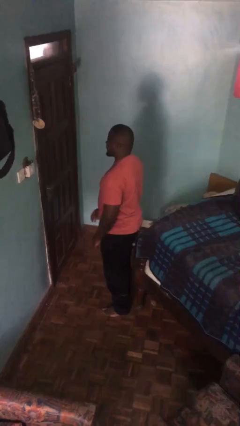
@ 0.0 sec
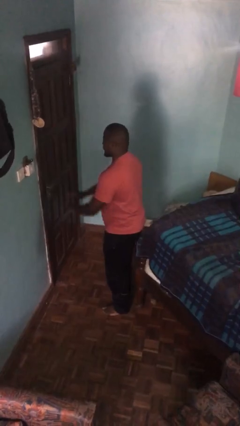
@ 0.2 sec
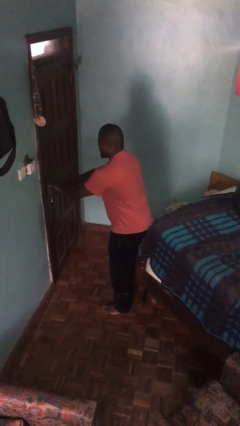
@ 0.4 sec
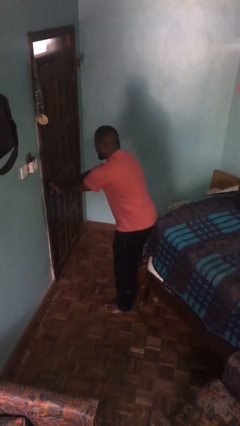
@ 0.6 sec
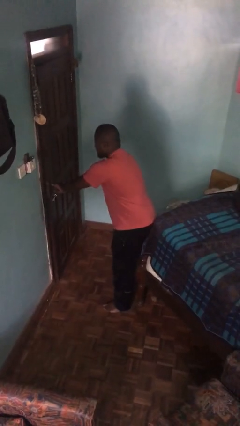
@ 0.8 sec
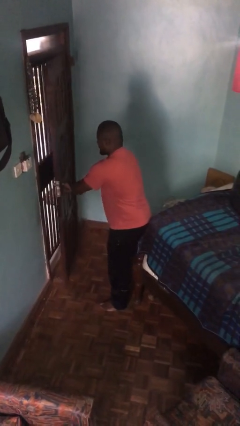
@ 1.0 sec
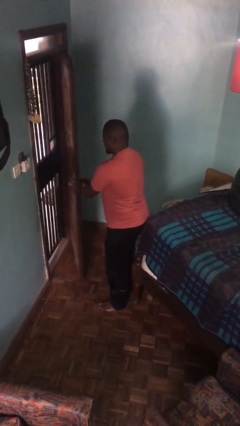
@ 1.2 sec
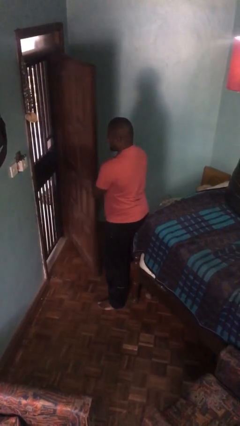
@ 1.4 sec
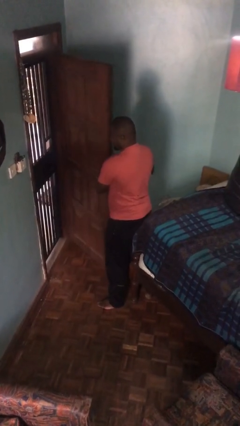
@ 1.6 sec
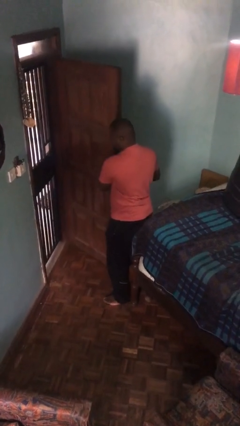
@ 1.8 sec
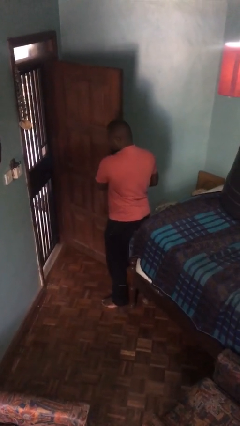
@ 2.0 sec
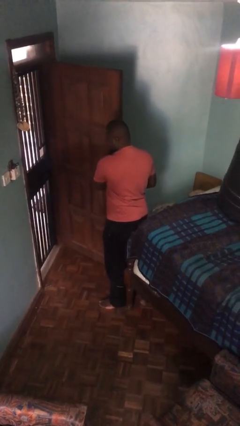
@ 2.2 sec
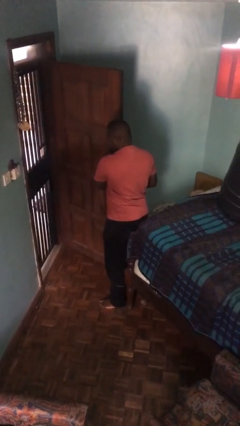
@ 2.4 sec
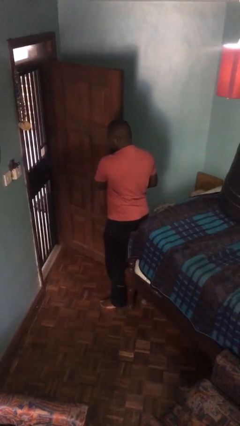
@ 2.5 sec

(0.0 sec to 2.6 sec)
person opens facility door

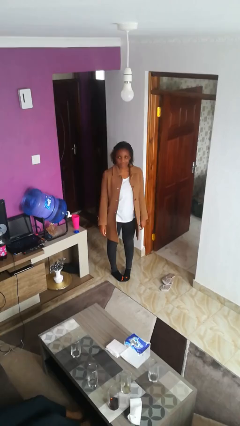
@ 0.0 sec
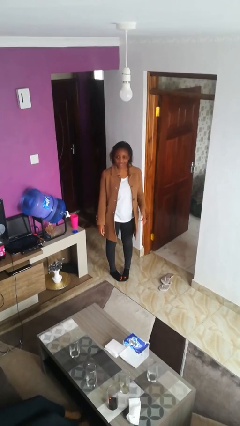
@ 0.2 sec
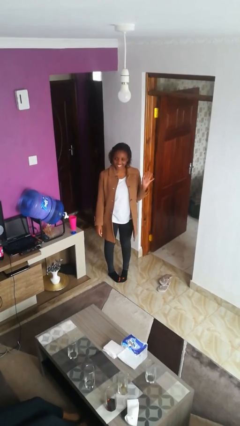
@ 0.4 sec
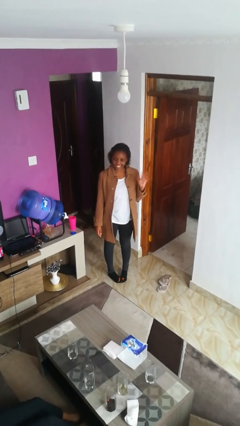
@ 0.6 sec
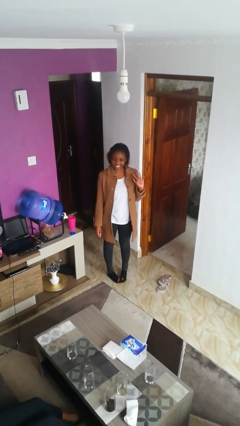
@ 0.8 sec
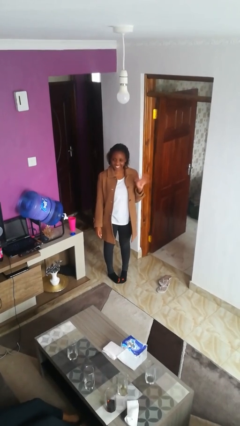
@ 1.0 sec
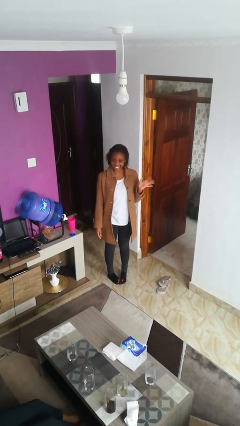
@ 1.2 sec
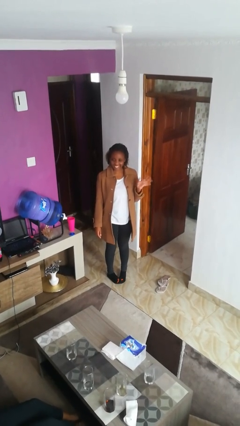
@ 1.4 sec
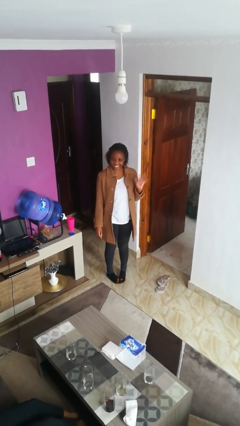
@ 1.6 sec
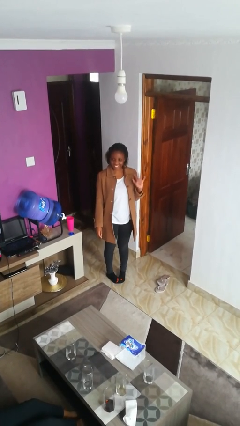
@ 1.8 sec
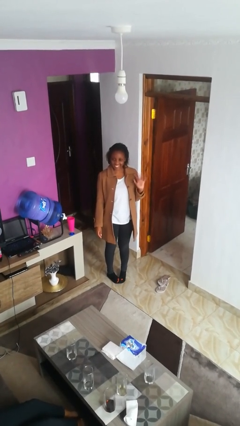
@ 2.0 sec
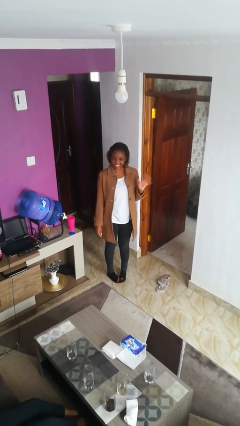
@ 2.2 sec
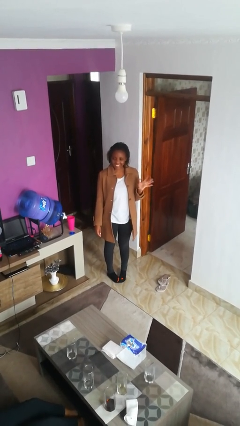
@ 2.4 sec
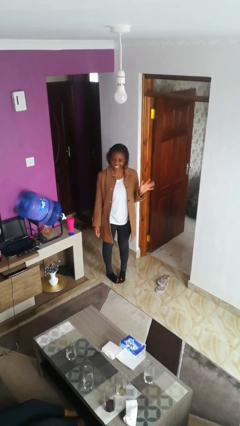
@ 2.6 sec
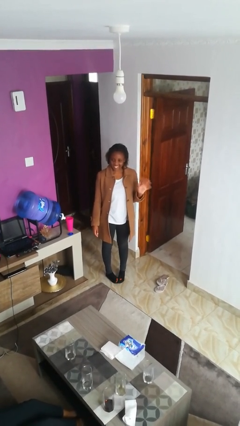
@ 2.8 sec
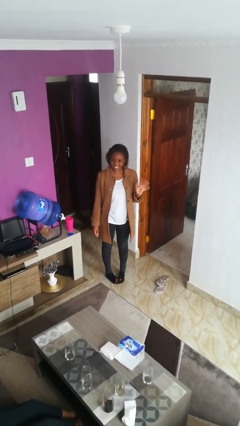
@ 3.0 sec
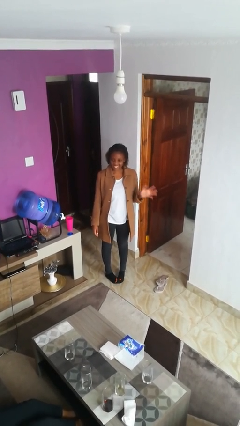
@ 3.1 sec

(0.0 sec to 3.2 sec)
person waves at person

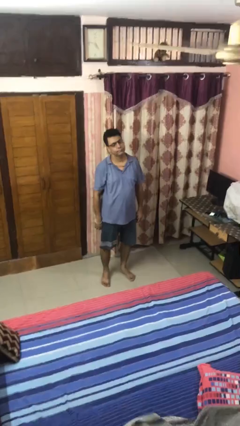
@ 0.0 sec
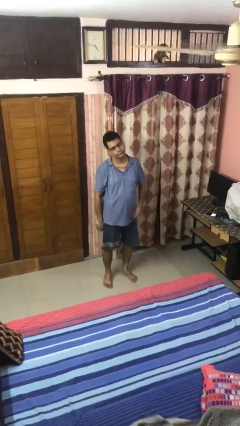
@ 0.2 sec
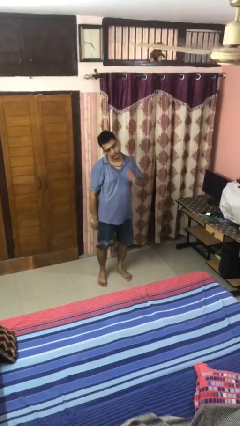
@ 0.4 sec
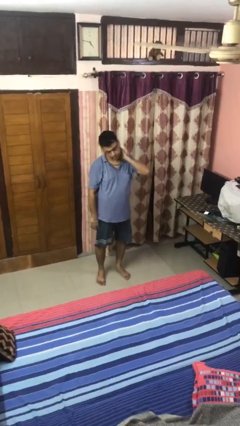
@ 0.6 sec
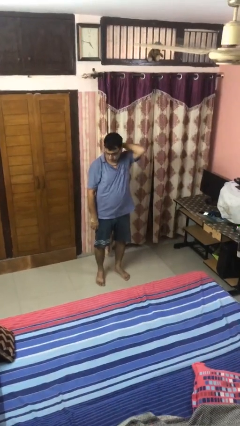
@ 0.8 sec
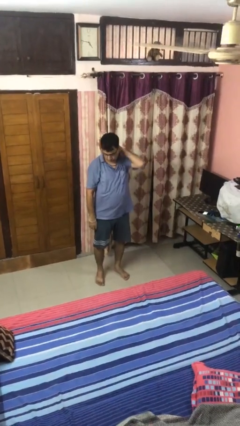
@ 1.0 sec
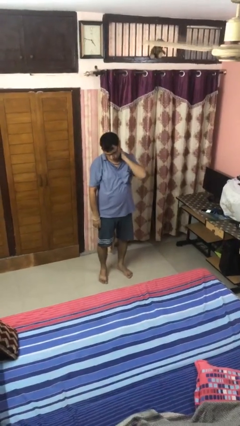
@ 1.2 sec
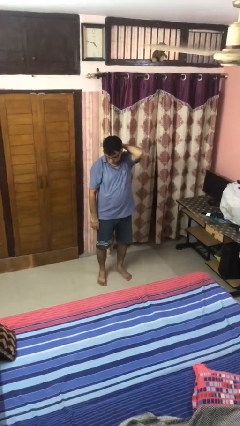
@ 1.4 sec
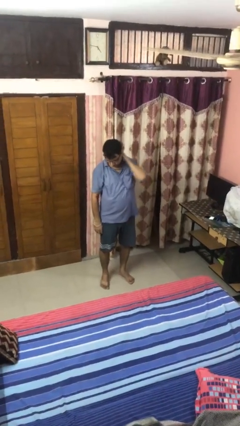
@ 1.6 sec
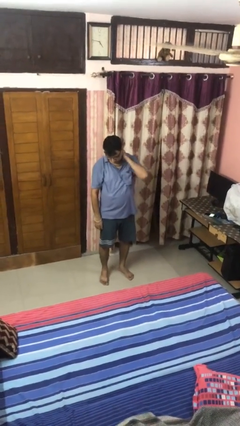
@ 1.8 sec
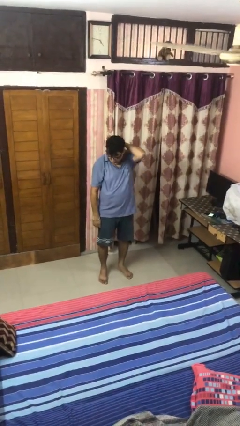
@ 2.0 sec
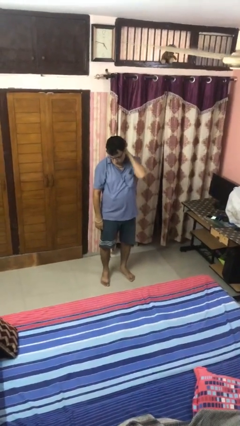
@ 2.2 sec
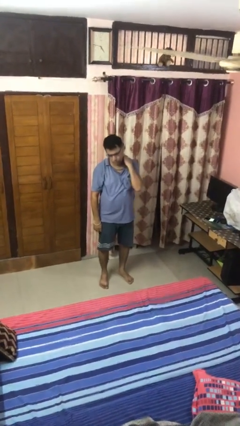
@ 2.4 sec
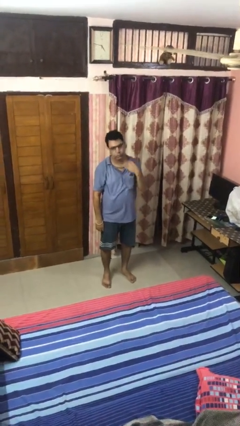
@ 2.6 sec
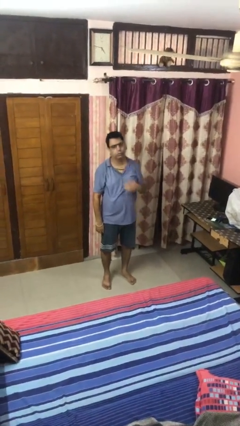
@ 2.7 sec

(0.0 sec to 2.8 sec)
person rubs neck

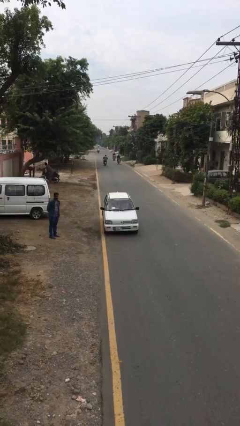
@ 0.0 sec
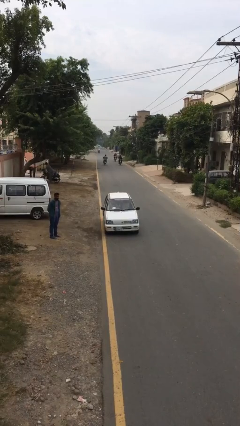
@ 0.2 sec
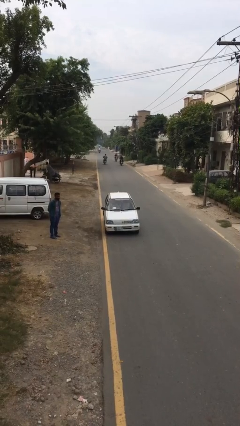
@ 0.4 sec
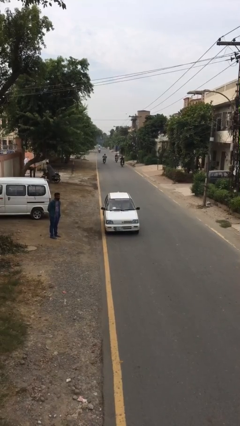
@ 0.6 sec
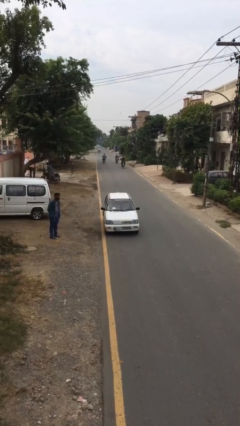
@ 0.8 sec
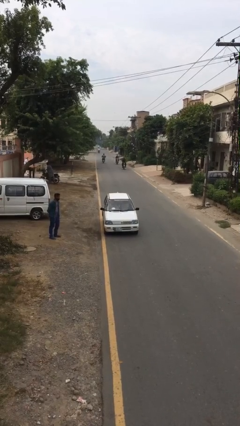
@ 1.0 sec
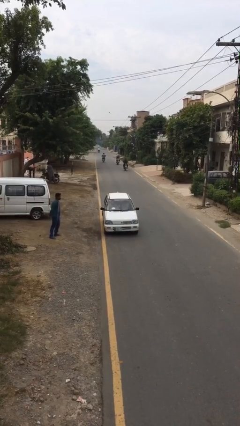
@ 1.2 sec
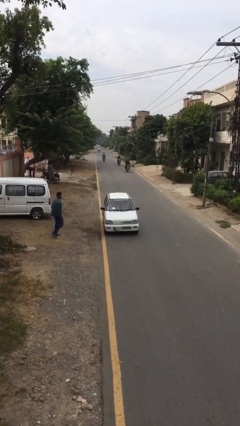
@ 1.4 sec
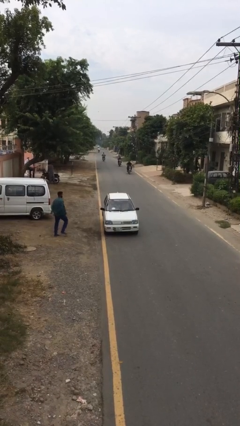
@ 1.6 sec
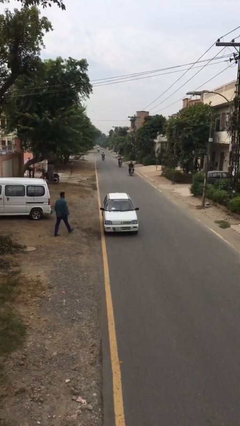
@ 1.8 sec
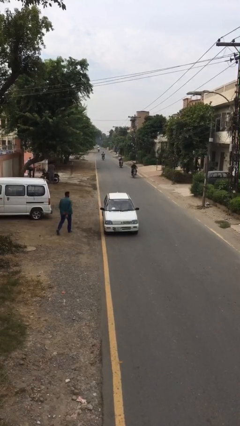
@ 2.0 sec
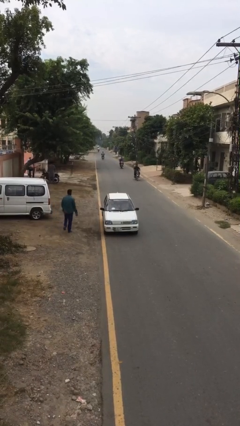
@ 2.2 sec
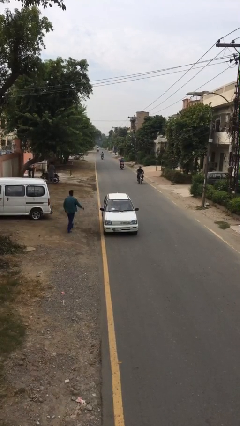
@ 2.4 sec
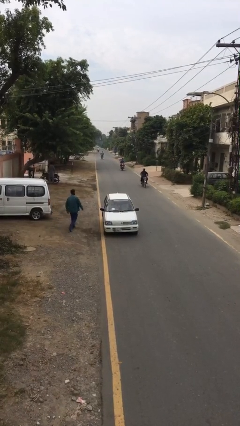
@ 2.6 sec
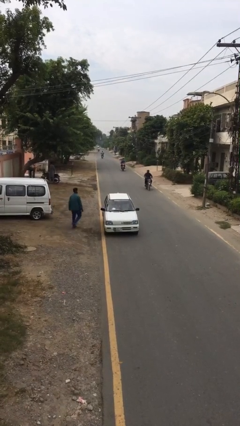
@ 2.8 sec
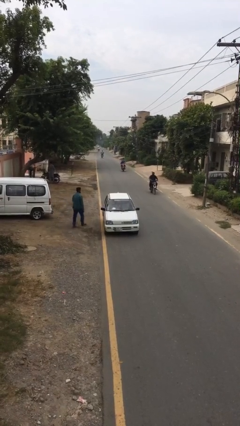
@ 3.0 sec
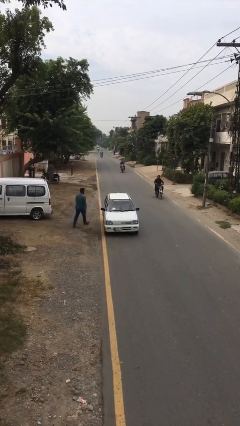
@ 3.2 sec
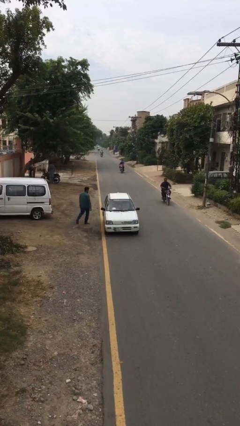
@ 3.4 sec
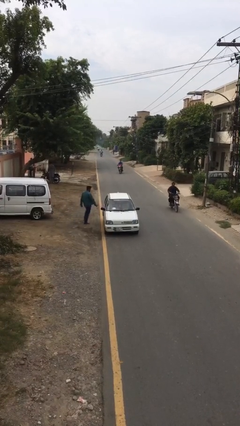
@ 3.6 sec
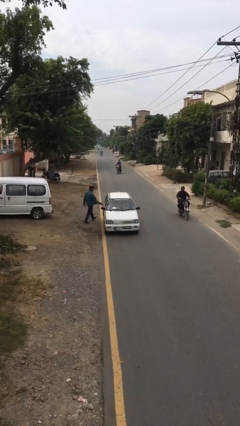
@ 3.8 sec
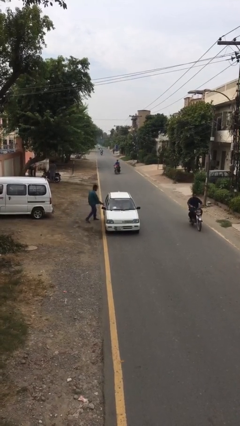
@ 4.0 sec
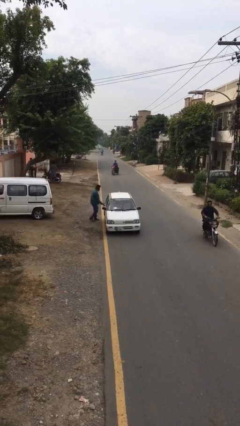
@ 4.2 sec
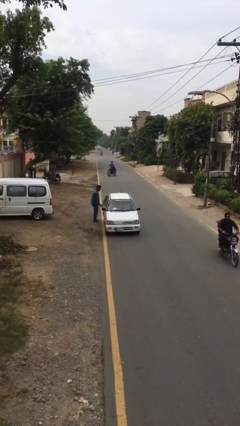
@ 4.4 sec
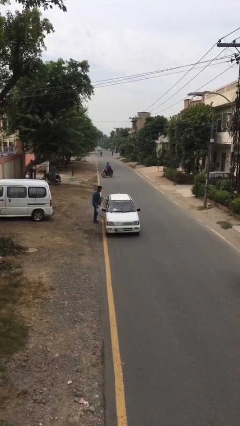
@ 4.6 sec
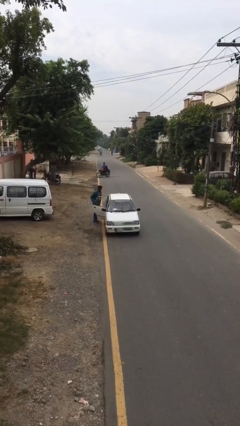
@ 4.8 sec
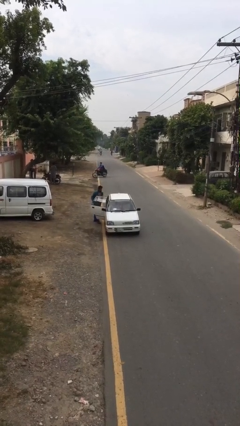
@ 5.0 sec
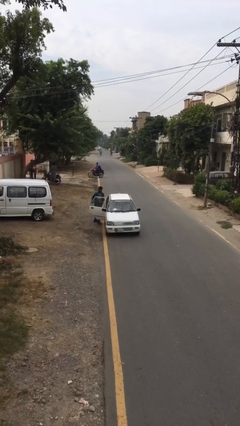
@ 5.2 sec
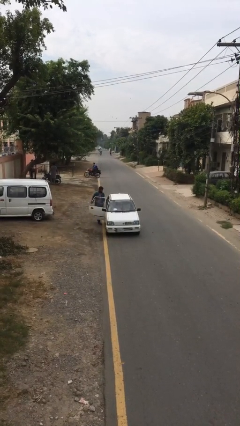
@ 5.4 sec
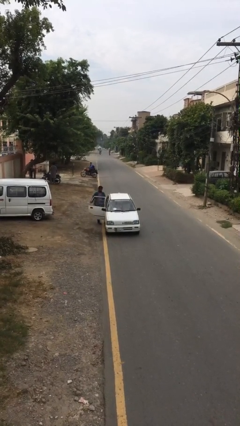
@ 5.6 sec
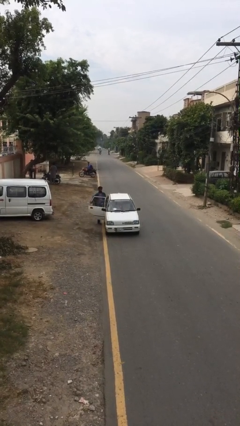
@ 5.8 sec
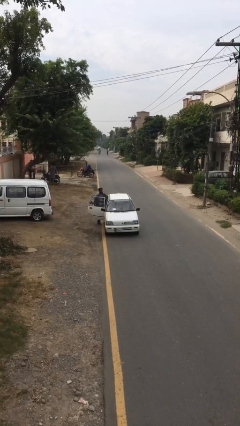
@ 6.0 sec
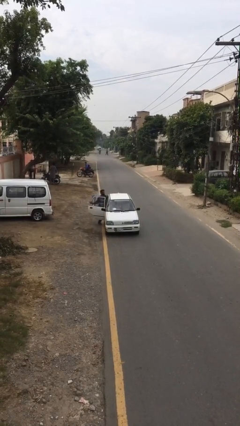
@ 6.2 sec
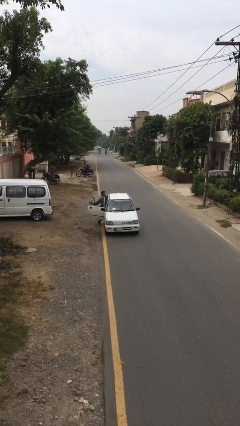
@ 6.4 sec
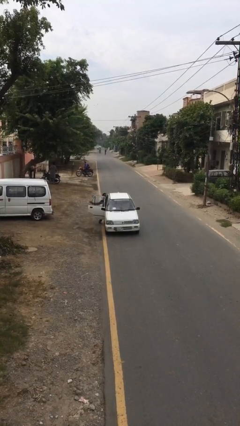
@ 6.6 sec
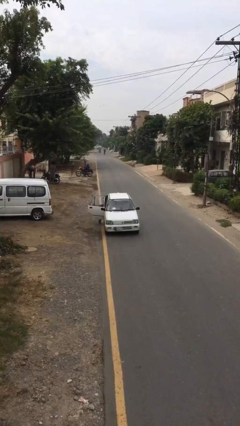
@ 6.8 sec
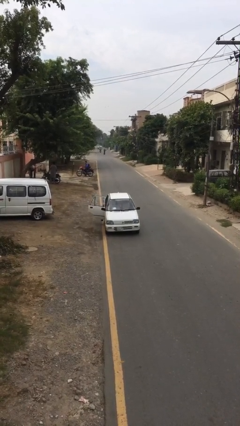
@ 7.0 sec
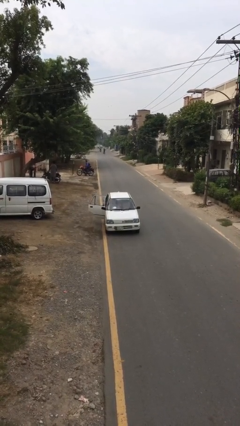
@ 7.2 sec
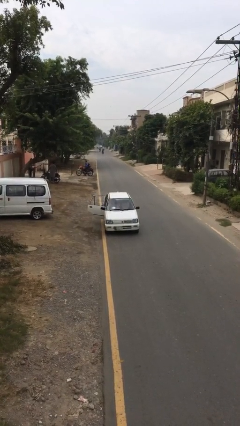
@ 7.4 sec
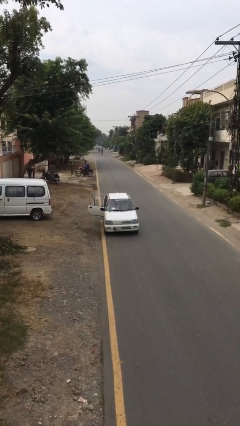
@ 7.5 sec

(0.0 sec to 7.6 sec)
car picks up person

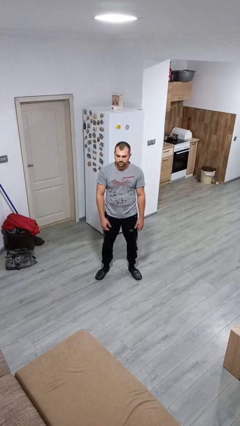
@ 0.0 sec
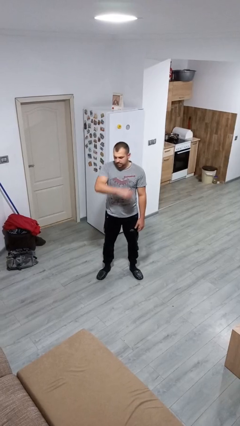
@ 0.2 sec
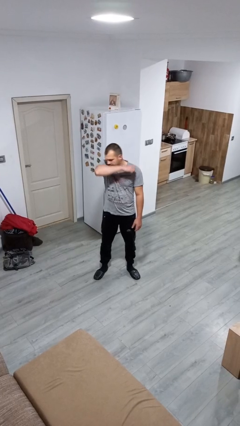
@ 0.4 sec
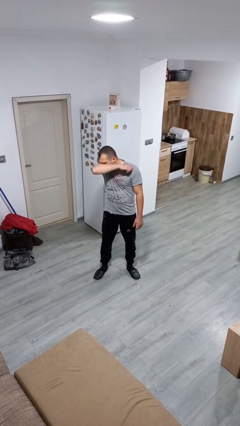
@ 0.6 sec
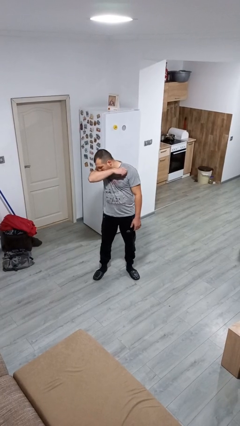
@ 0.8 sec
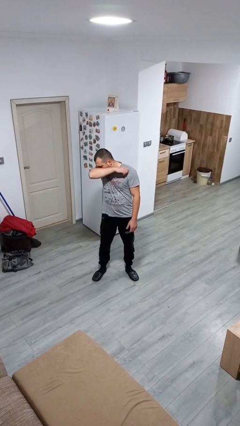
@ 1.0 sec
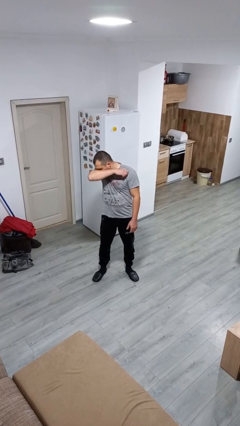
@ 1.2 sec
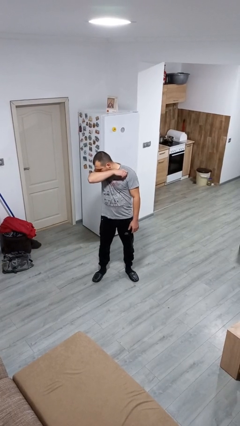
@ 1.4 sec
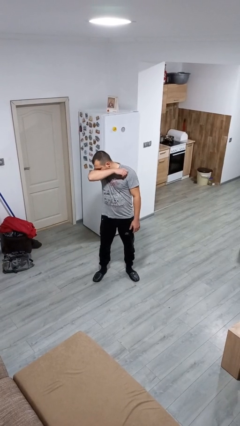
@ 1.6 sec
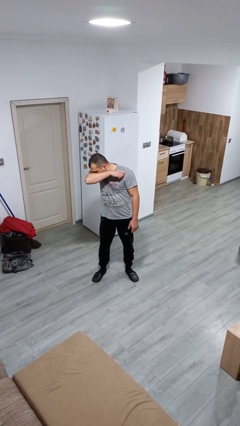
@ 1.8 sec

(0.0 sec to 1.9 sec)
person sneezes into arm
